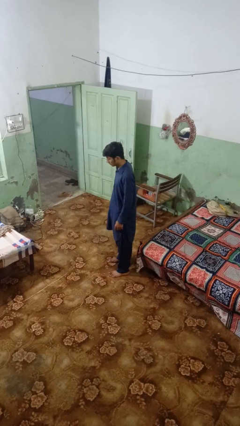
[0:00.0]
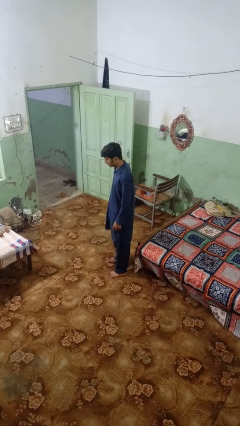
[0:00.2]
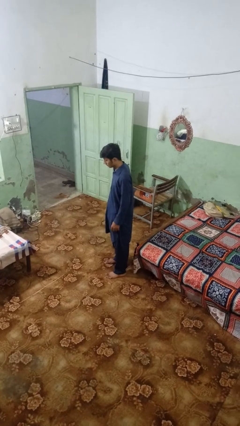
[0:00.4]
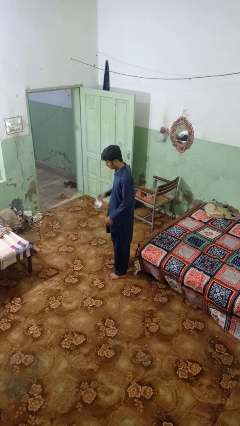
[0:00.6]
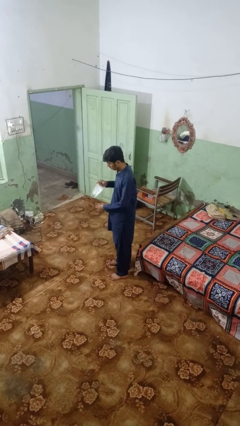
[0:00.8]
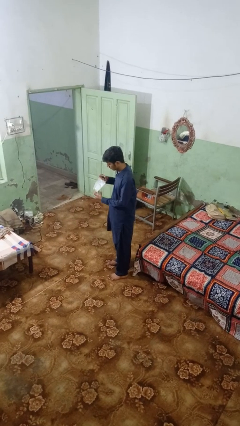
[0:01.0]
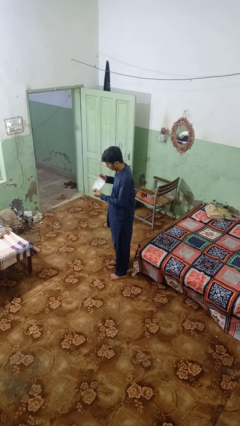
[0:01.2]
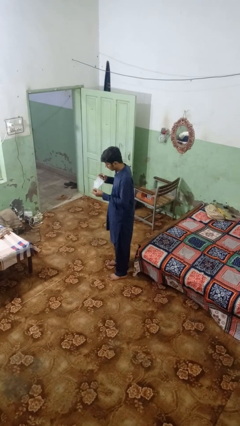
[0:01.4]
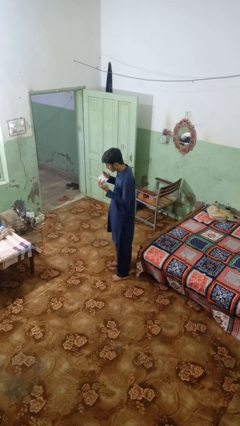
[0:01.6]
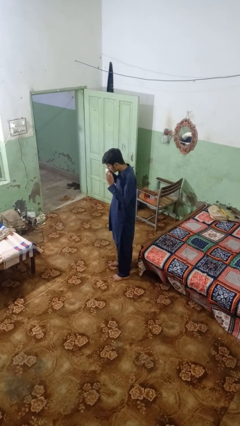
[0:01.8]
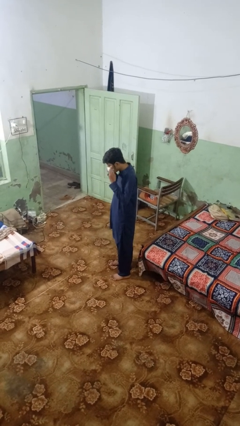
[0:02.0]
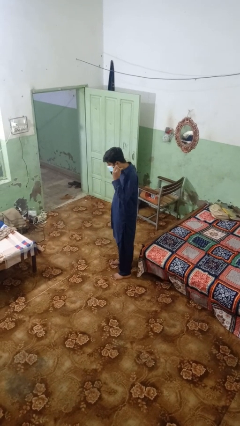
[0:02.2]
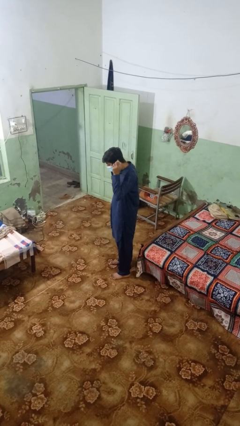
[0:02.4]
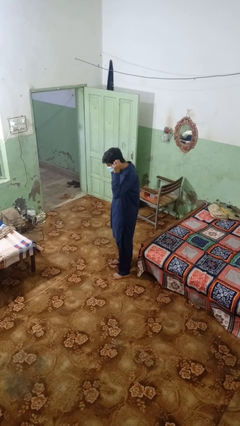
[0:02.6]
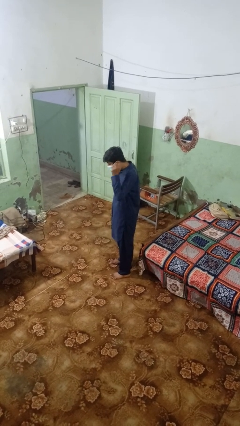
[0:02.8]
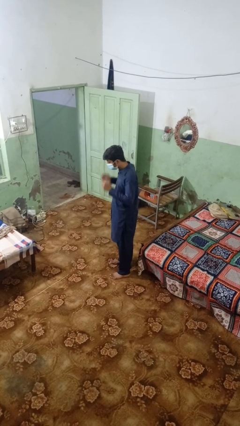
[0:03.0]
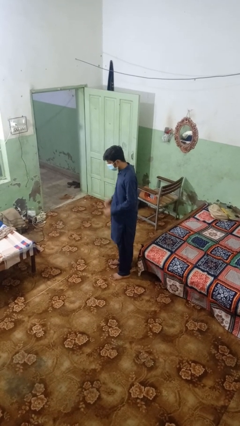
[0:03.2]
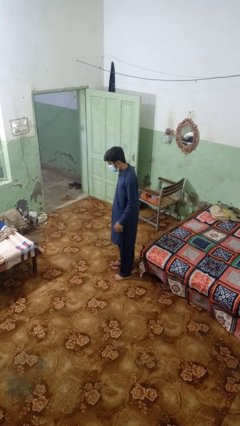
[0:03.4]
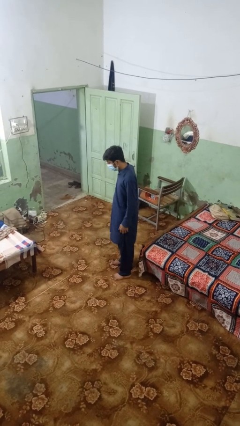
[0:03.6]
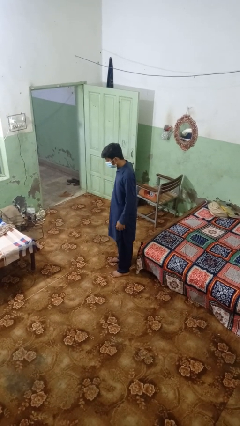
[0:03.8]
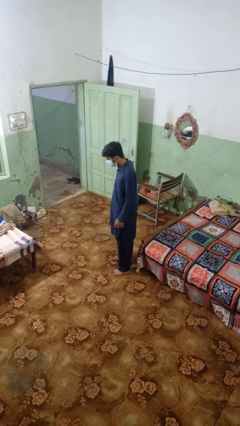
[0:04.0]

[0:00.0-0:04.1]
person puts on facemask

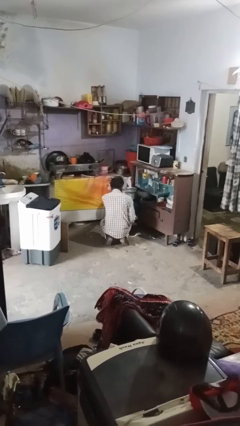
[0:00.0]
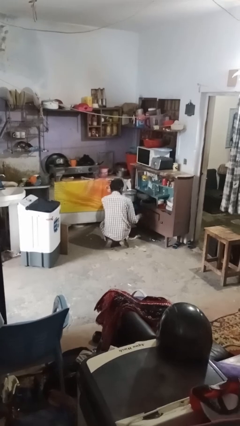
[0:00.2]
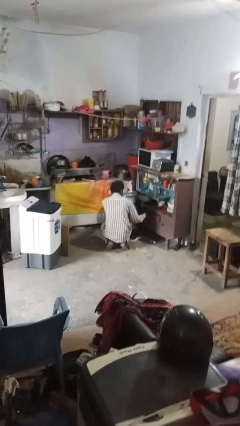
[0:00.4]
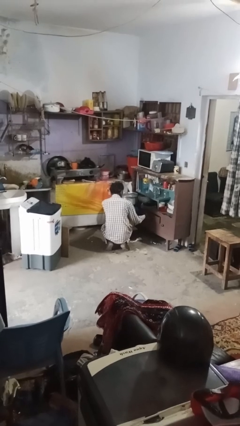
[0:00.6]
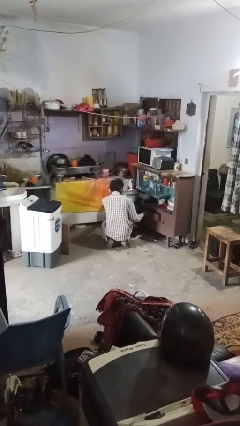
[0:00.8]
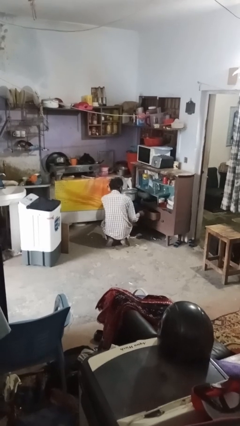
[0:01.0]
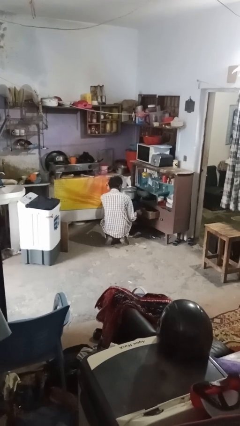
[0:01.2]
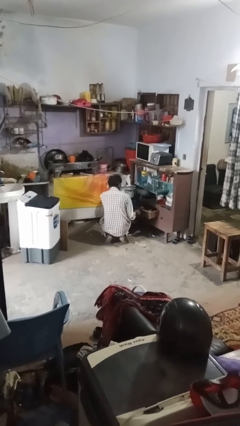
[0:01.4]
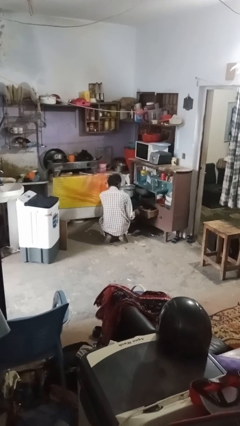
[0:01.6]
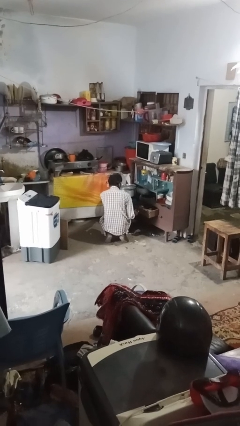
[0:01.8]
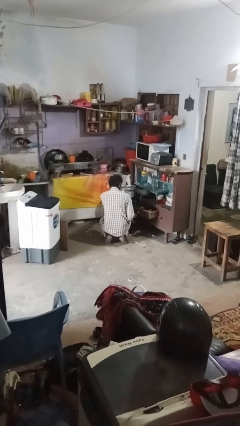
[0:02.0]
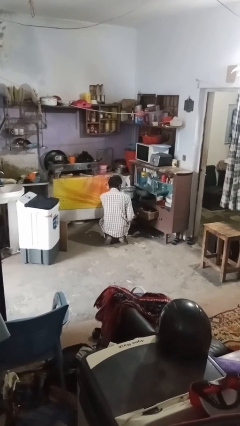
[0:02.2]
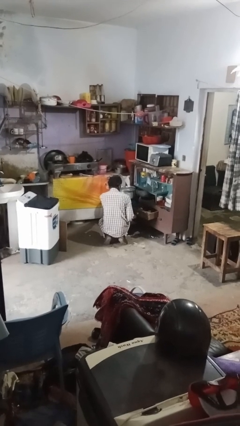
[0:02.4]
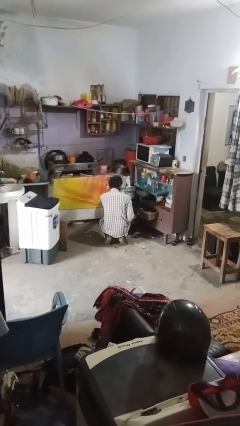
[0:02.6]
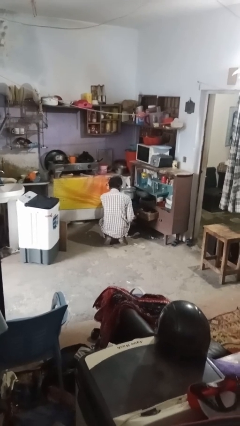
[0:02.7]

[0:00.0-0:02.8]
person opens kitchen drawer

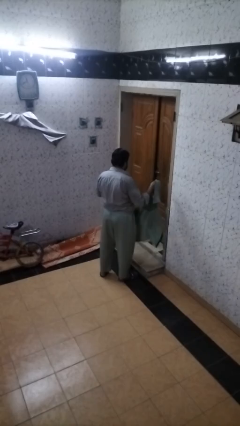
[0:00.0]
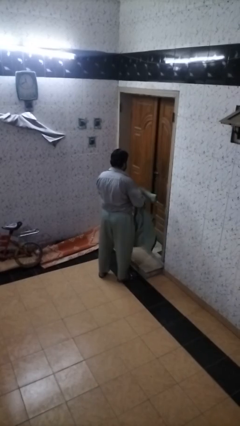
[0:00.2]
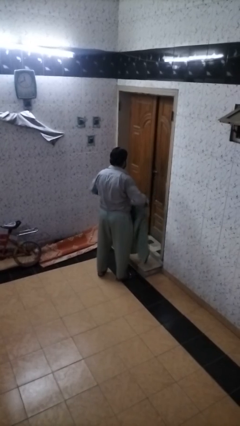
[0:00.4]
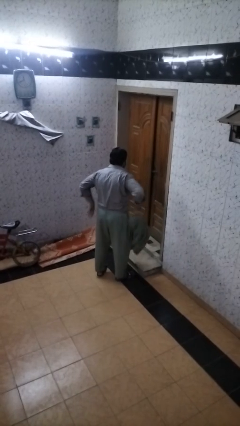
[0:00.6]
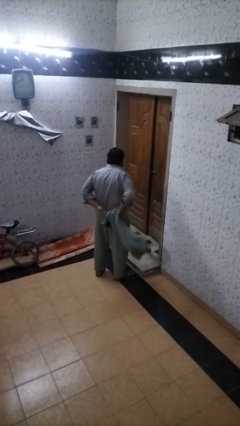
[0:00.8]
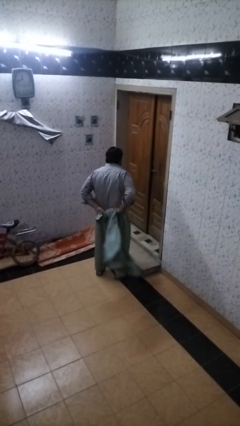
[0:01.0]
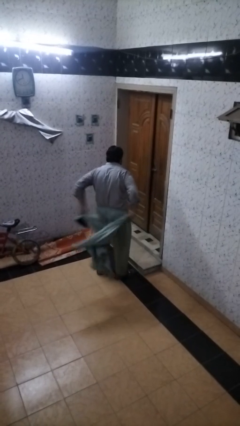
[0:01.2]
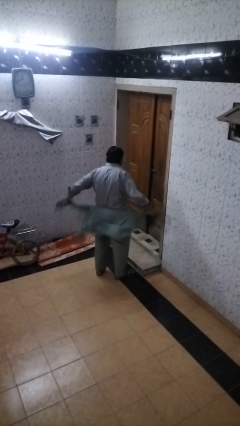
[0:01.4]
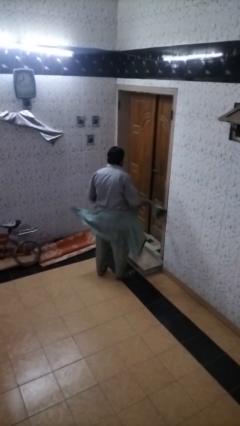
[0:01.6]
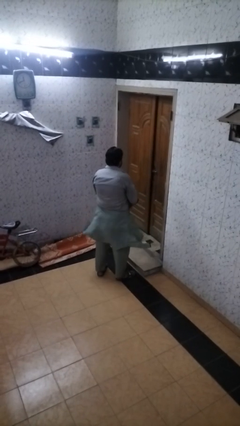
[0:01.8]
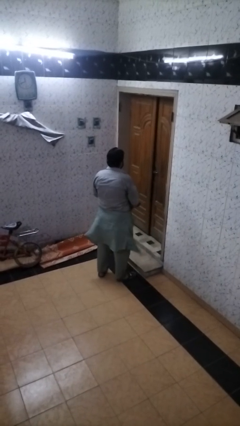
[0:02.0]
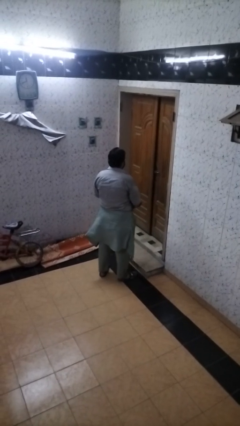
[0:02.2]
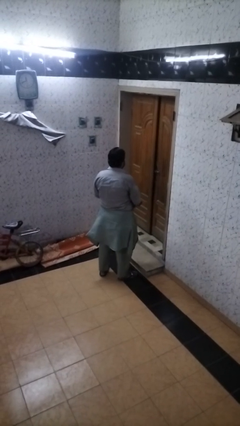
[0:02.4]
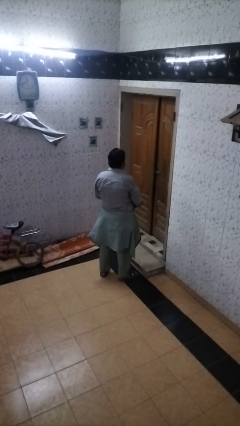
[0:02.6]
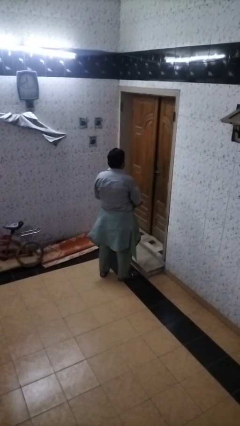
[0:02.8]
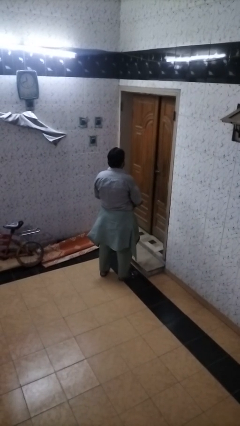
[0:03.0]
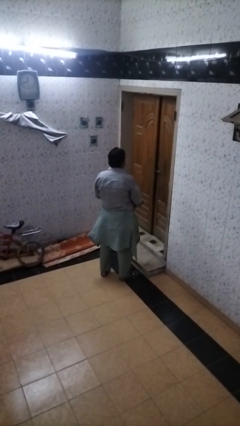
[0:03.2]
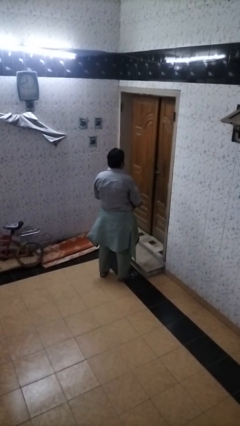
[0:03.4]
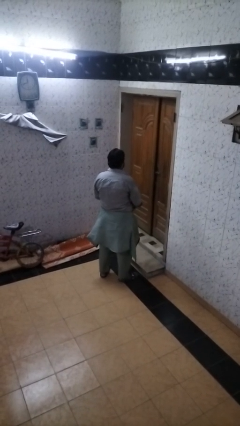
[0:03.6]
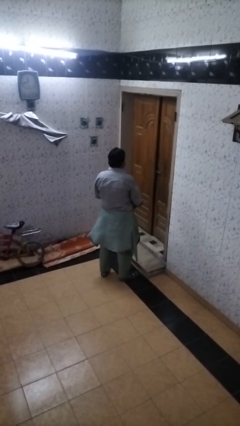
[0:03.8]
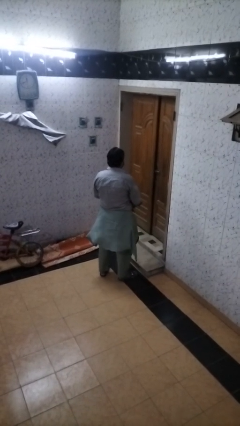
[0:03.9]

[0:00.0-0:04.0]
person ties jacket around waist

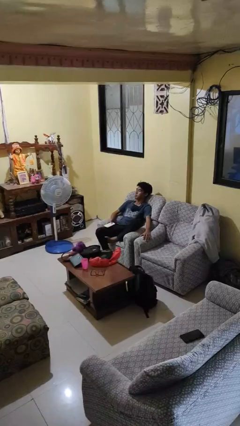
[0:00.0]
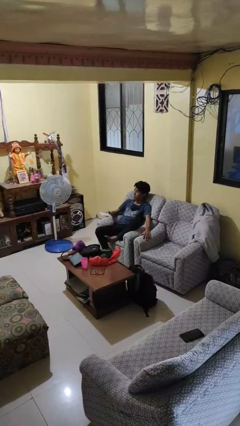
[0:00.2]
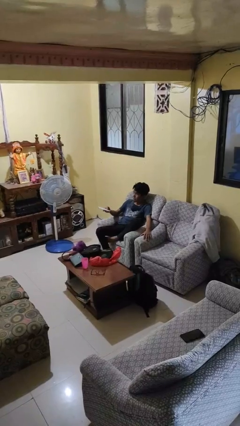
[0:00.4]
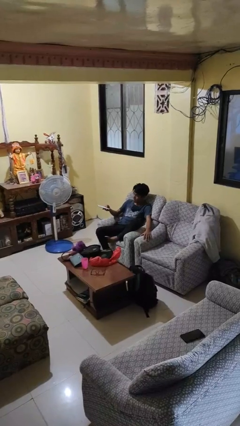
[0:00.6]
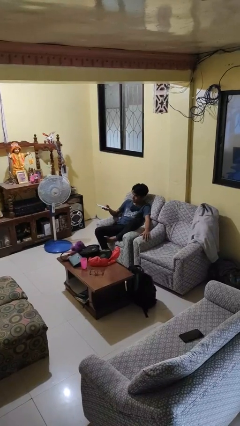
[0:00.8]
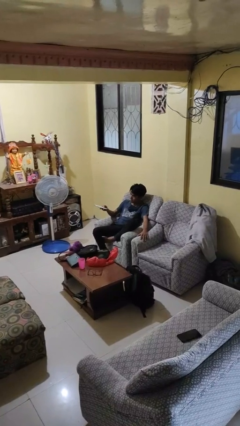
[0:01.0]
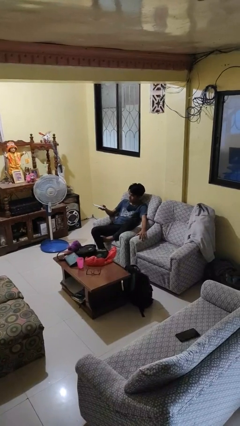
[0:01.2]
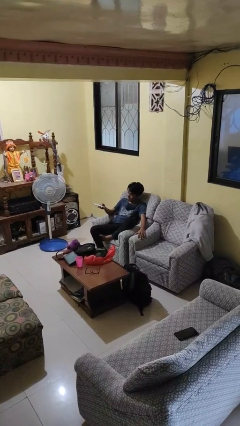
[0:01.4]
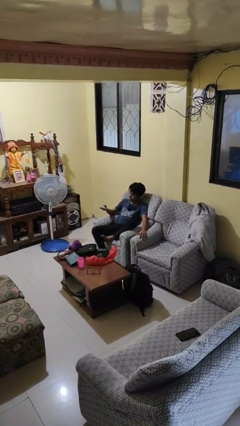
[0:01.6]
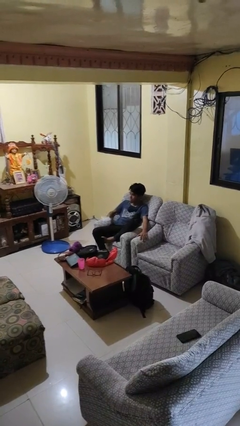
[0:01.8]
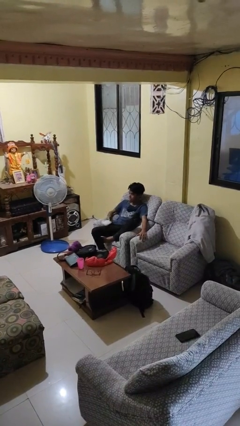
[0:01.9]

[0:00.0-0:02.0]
person uses television remote

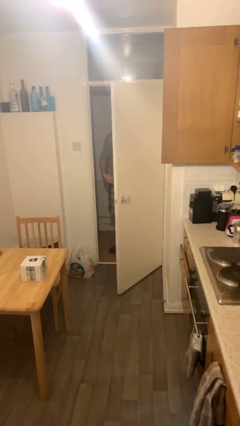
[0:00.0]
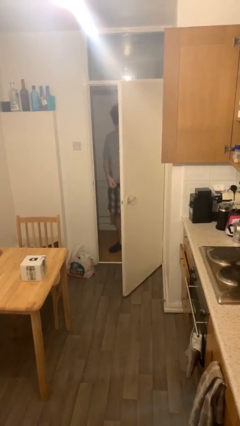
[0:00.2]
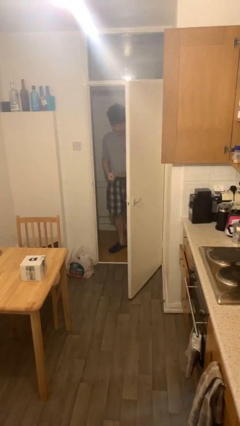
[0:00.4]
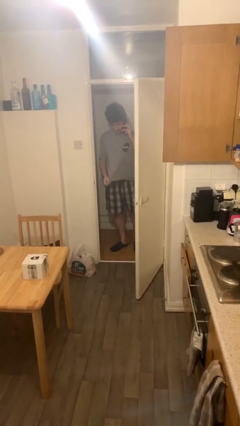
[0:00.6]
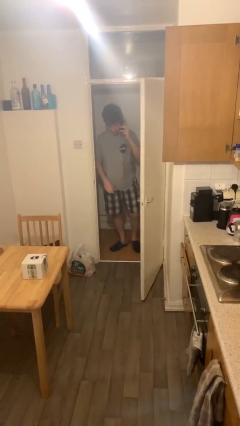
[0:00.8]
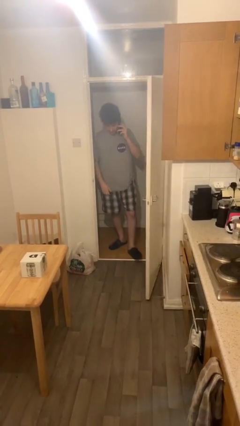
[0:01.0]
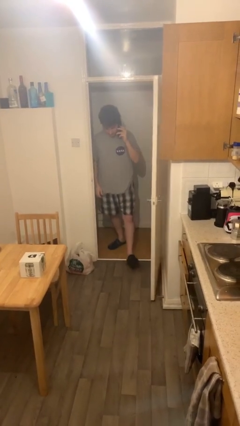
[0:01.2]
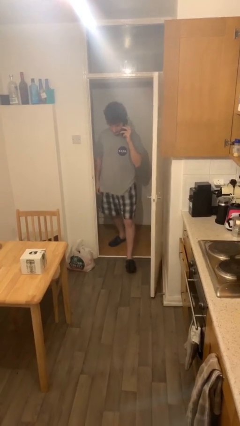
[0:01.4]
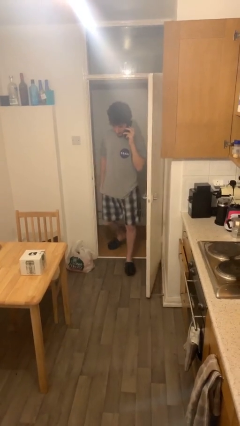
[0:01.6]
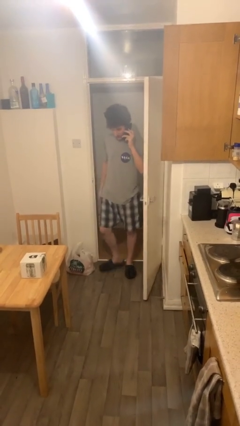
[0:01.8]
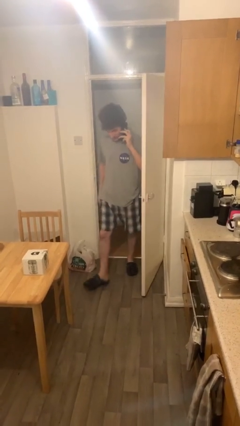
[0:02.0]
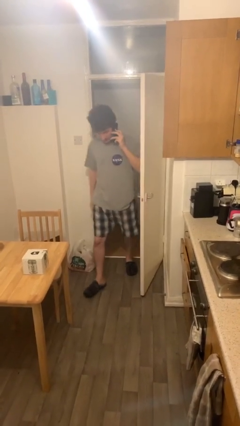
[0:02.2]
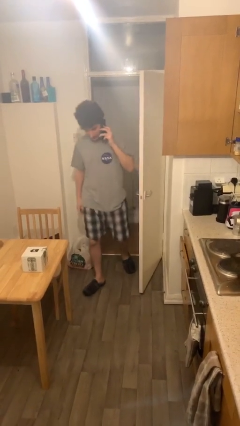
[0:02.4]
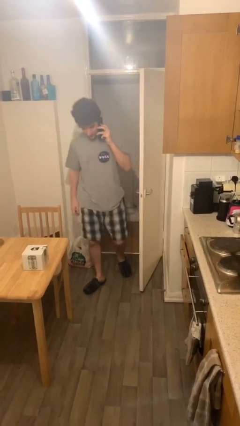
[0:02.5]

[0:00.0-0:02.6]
person enters scene through structure

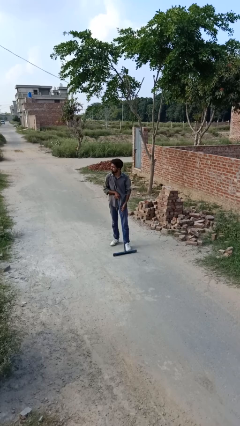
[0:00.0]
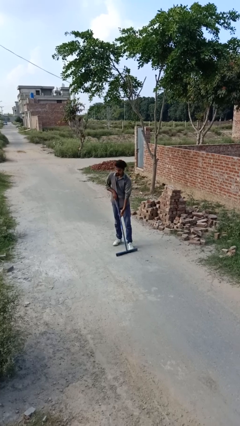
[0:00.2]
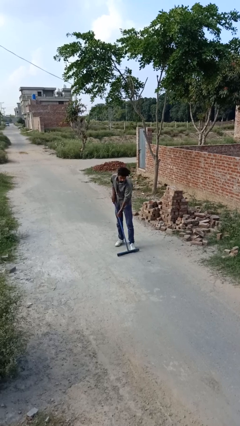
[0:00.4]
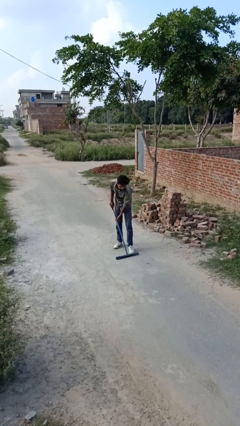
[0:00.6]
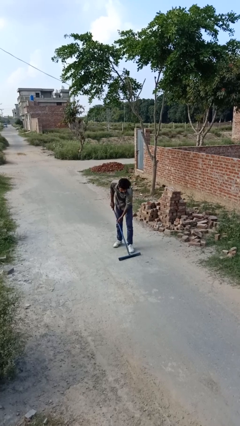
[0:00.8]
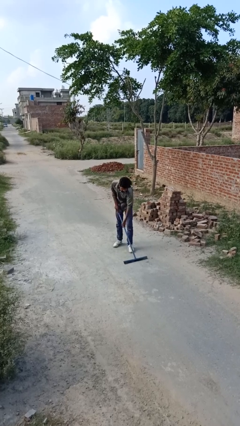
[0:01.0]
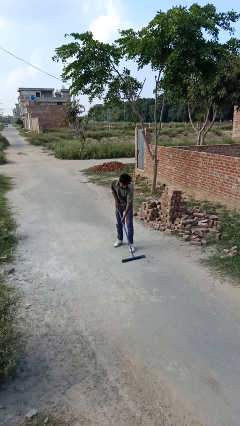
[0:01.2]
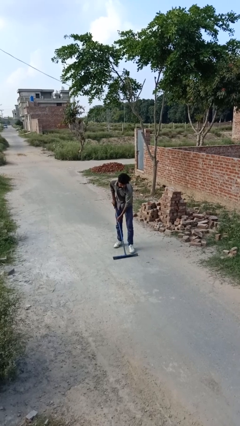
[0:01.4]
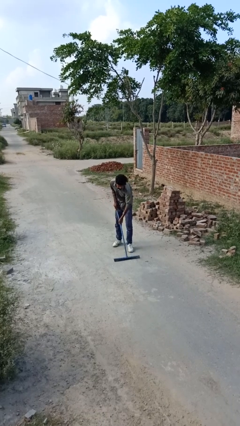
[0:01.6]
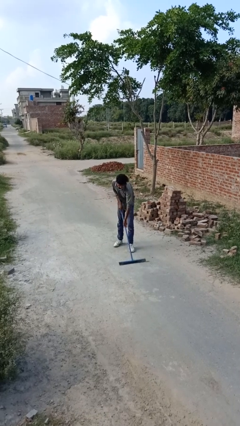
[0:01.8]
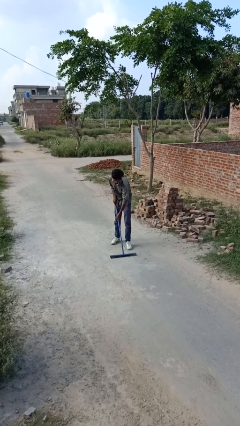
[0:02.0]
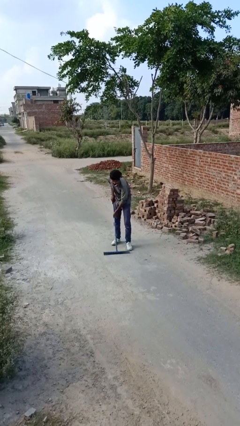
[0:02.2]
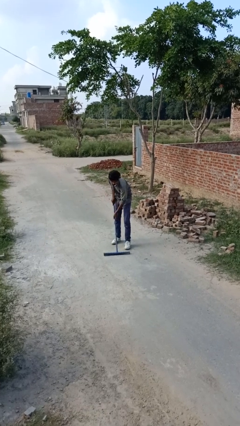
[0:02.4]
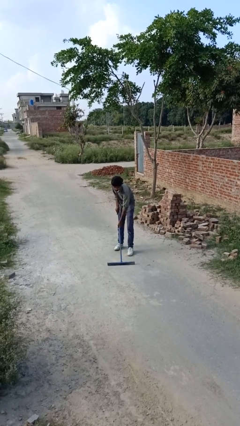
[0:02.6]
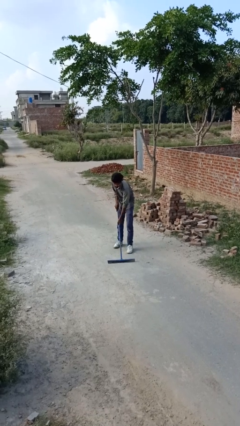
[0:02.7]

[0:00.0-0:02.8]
person sweeps floor
